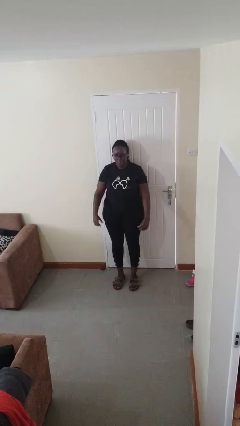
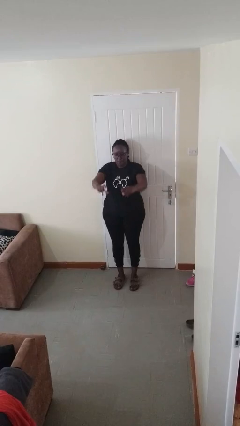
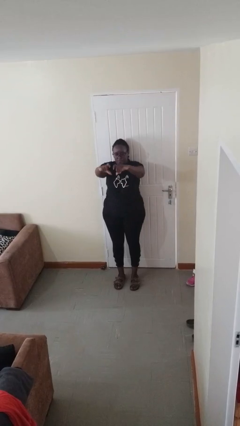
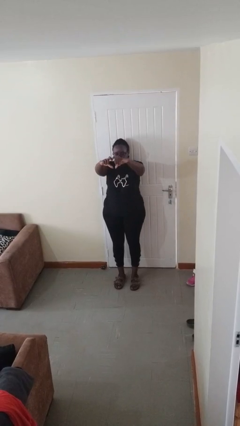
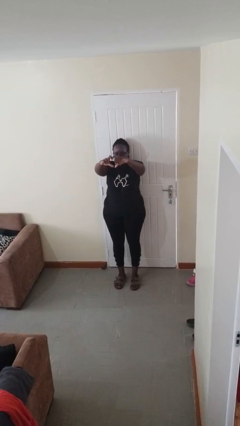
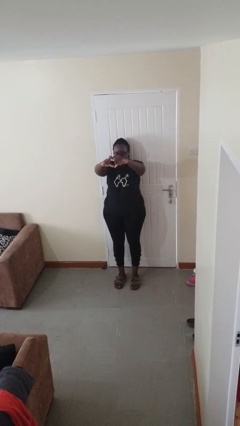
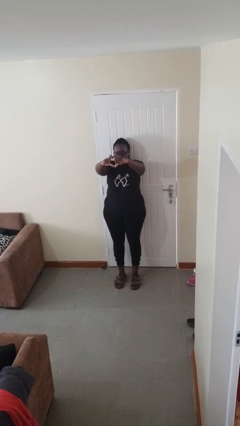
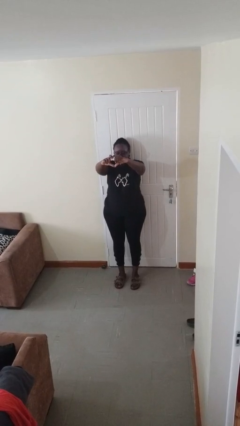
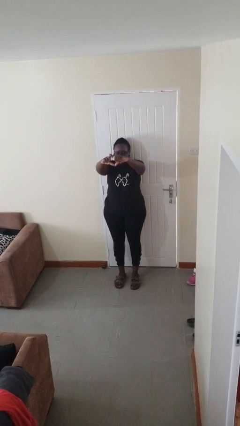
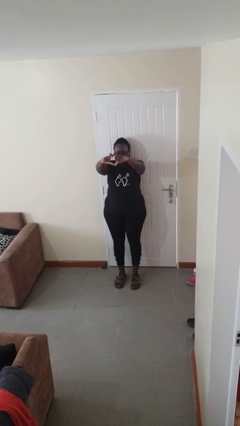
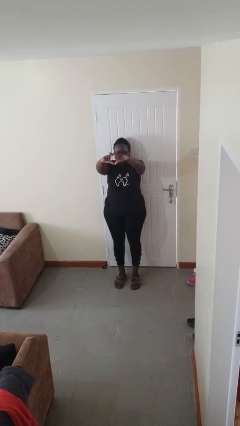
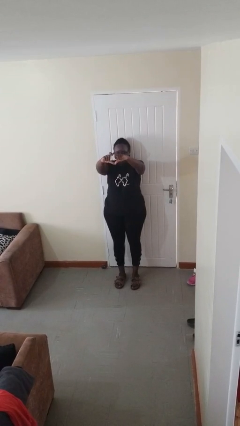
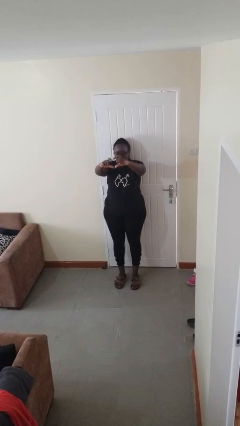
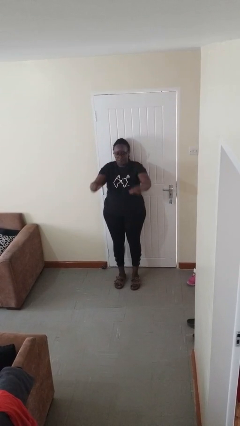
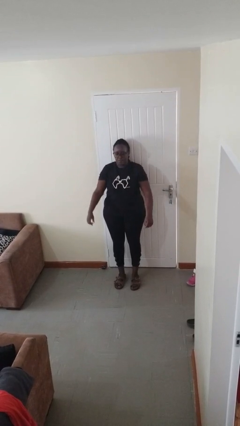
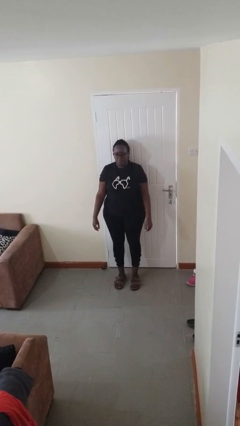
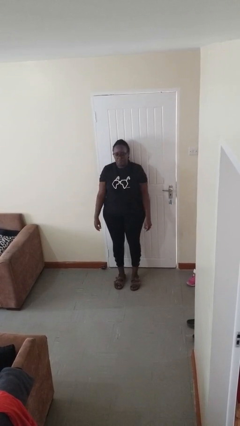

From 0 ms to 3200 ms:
person gestures heart

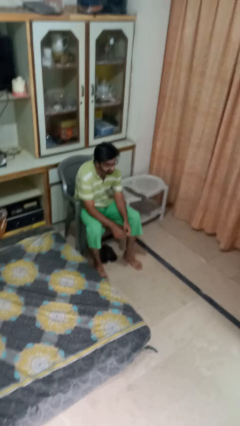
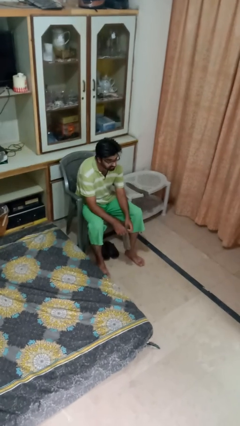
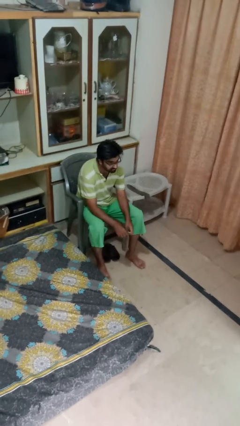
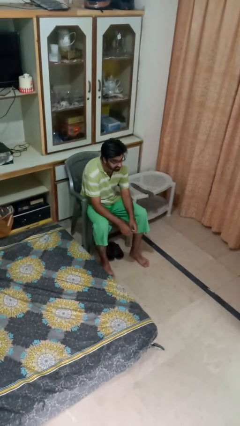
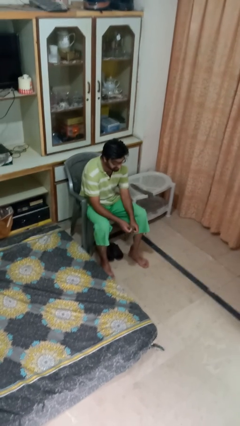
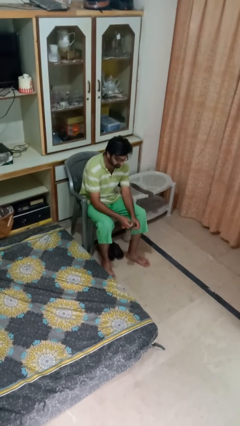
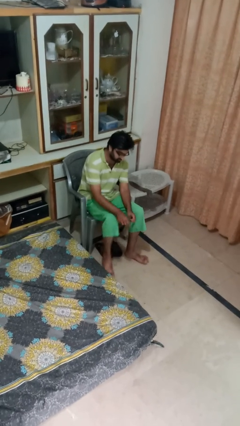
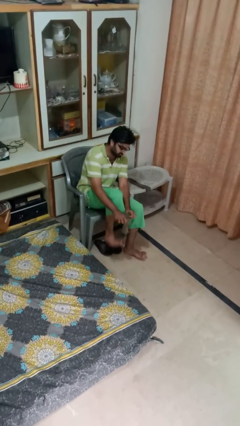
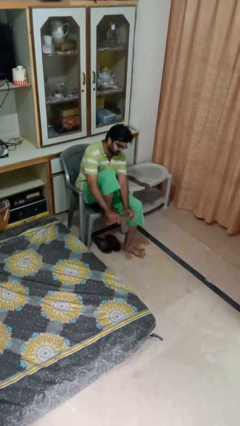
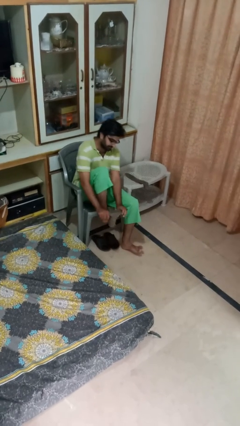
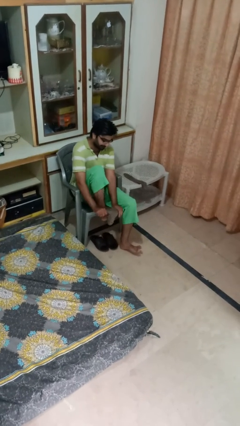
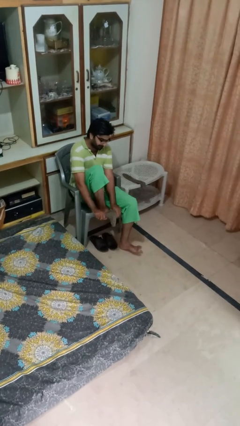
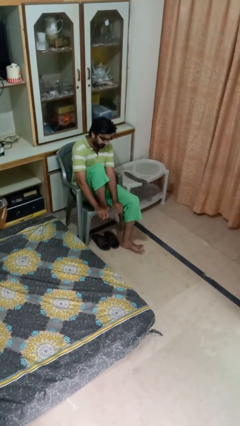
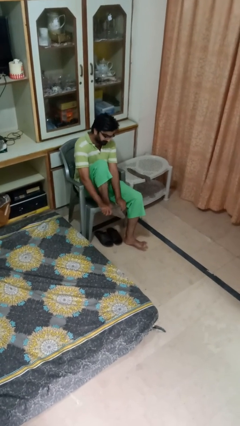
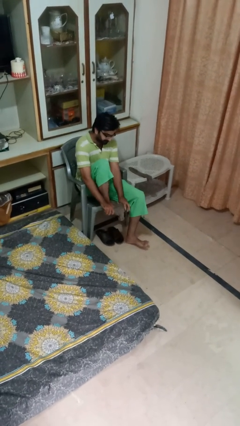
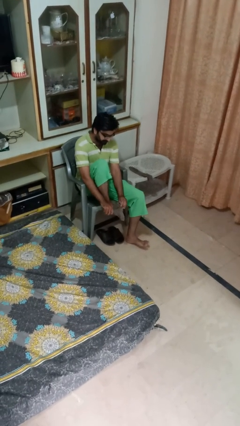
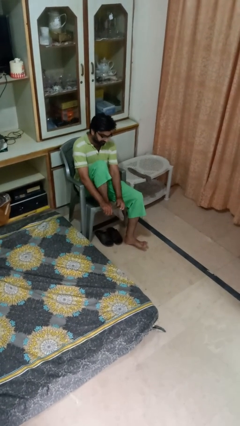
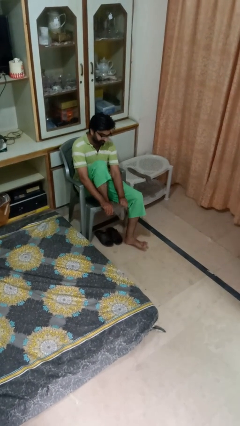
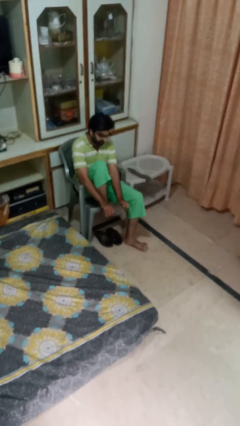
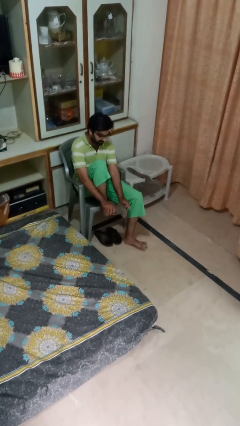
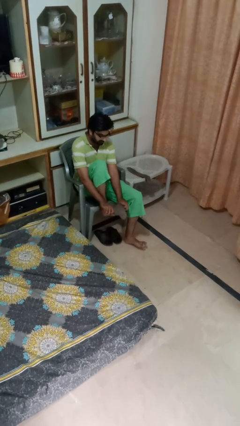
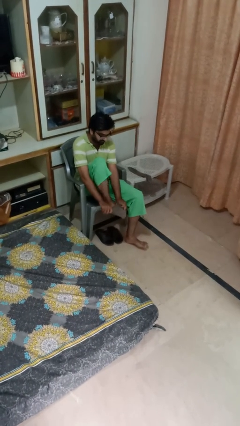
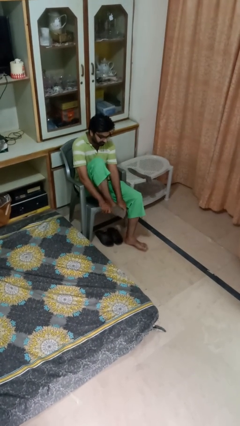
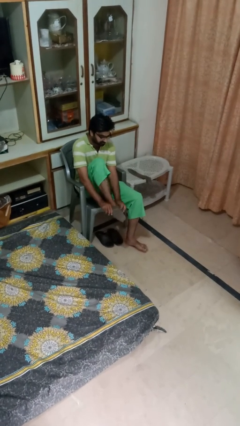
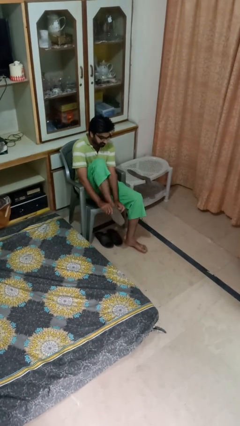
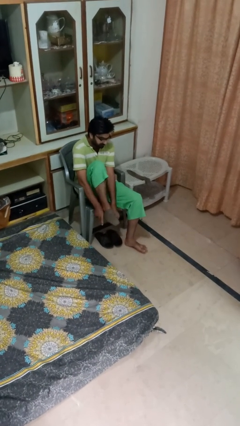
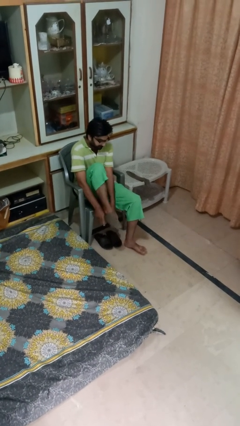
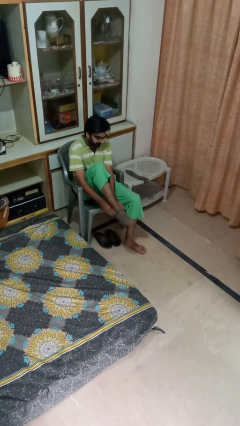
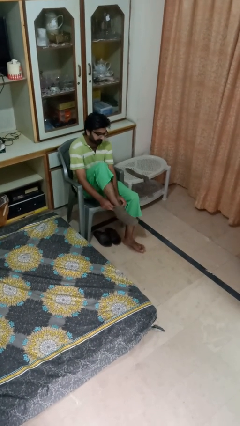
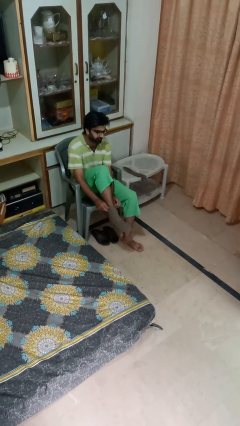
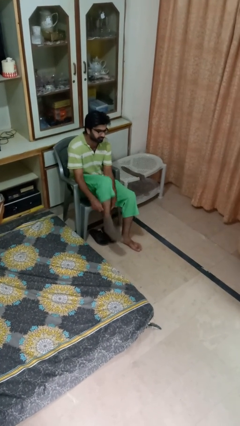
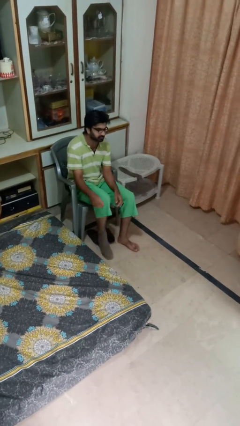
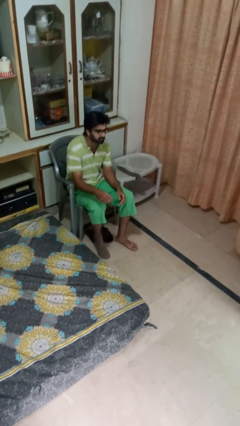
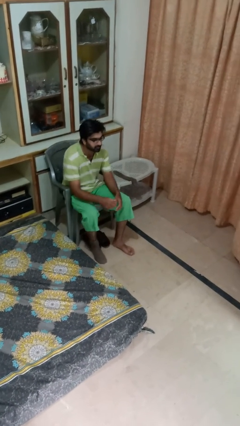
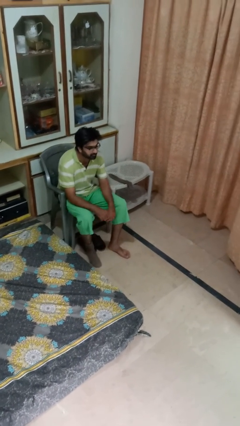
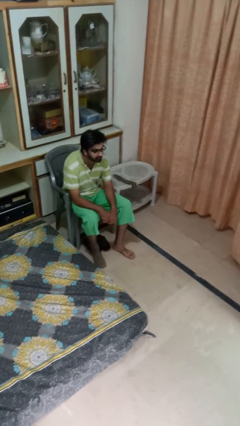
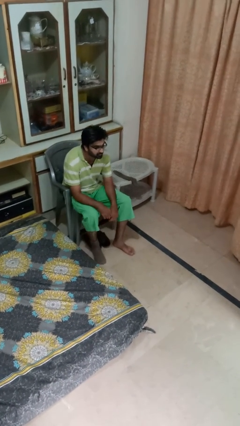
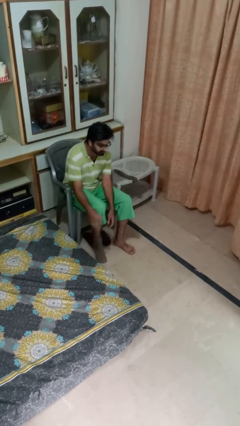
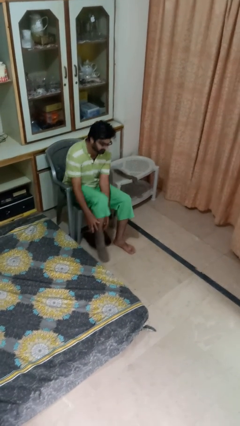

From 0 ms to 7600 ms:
person puts on socks

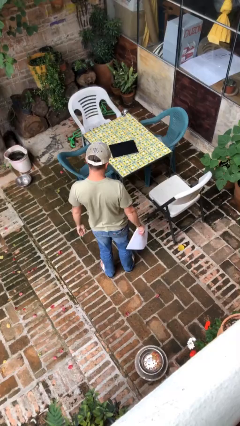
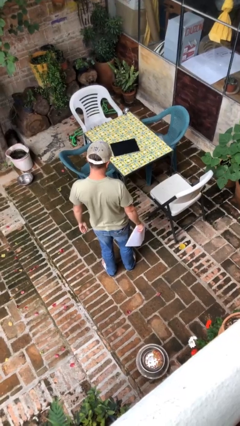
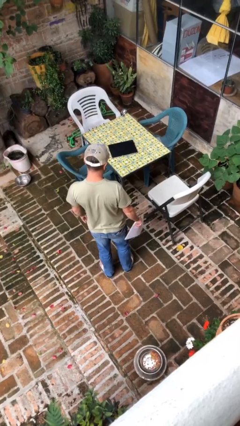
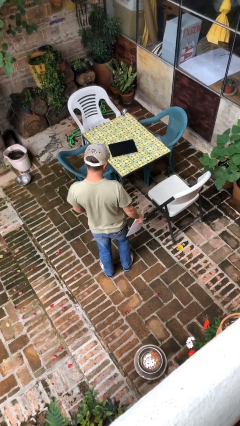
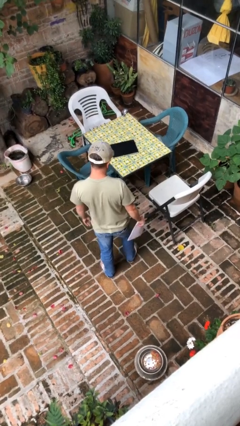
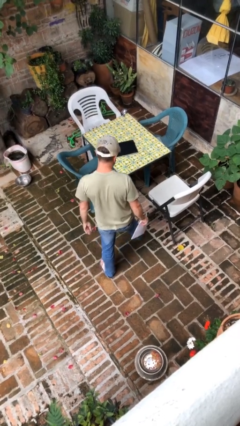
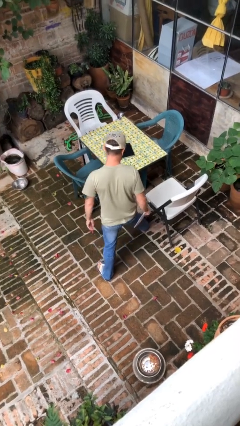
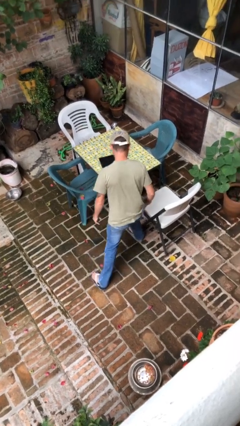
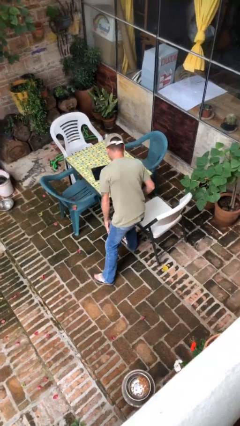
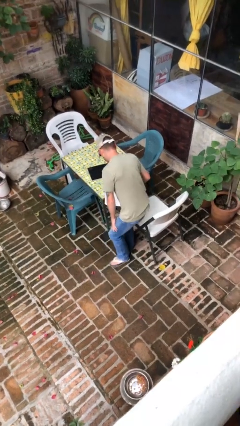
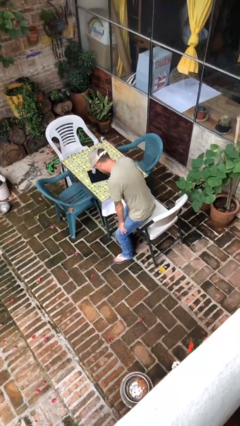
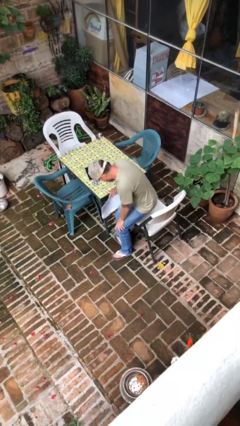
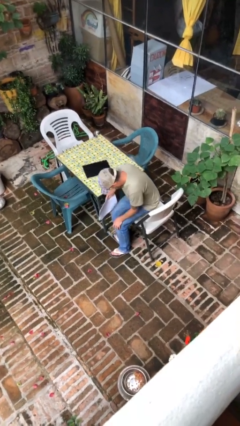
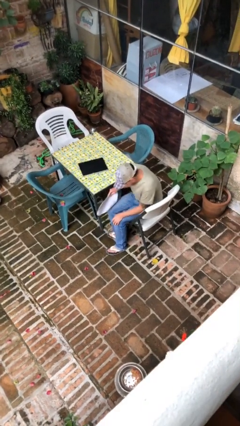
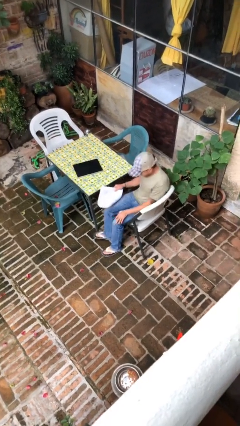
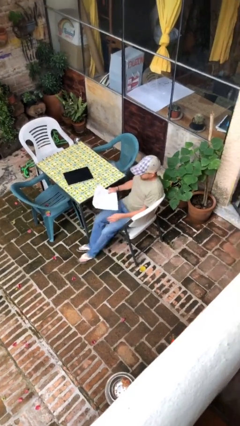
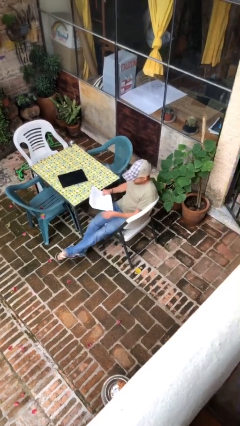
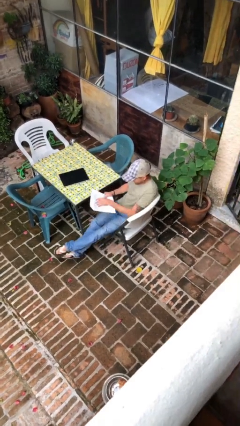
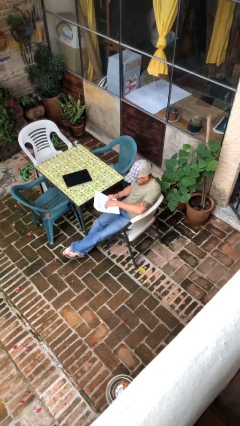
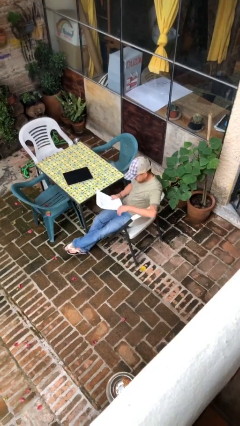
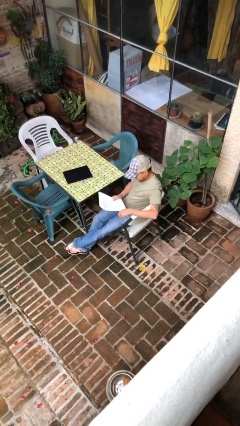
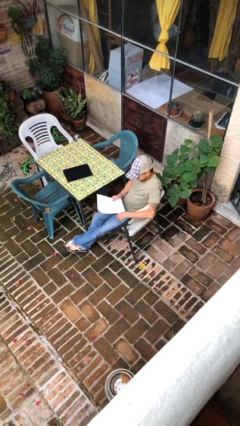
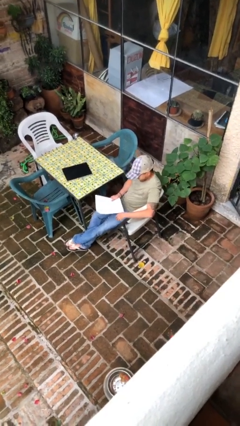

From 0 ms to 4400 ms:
person sits down

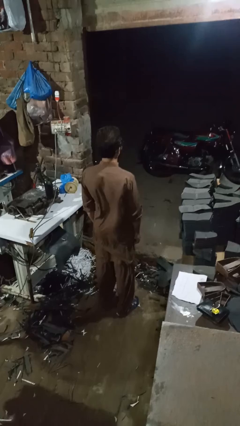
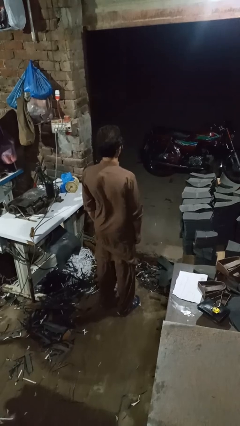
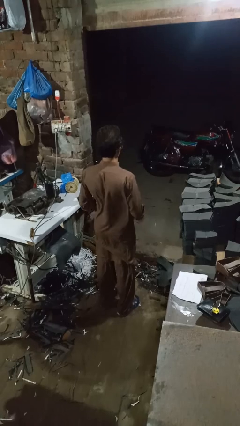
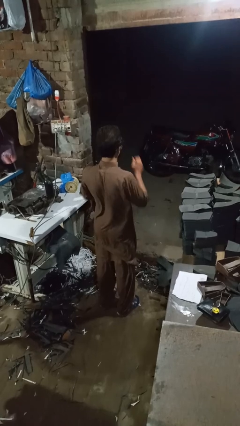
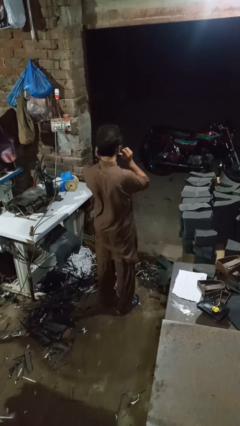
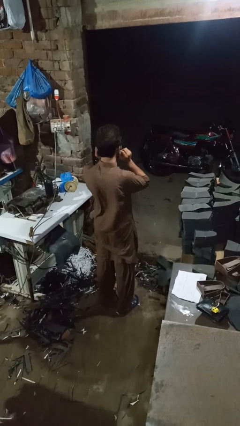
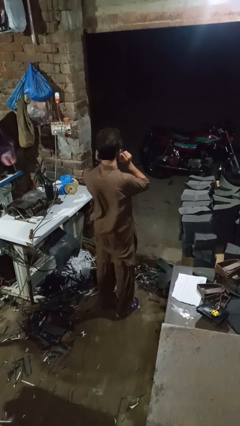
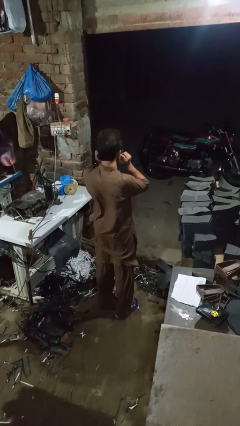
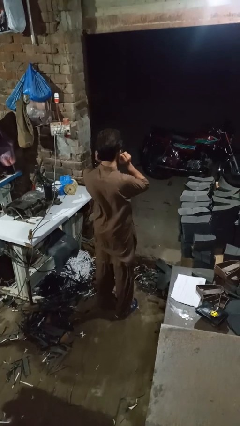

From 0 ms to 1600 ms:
person touches earlobe

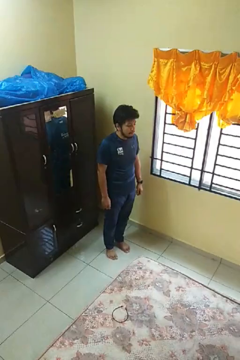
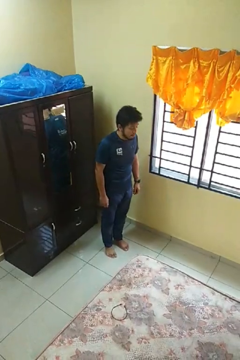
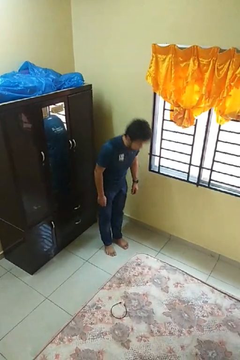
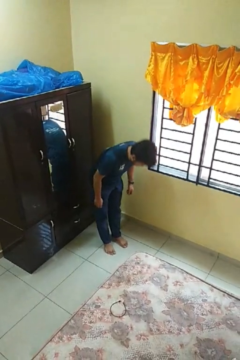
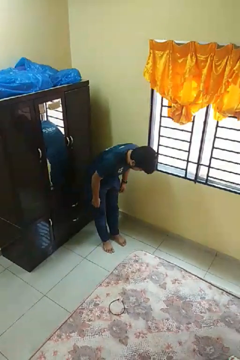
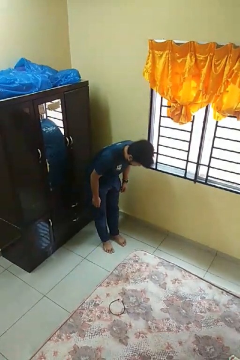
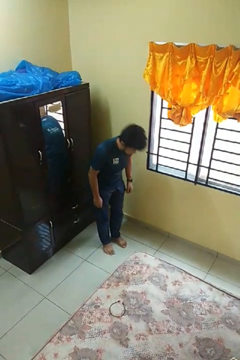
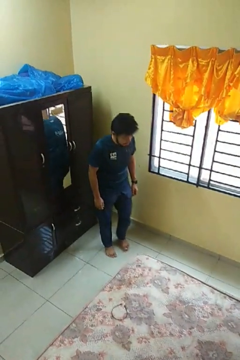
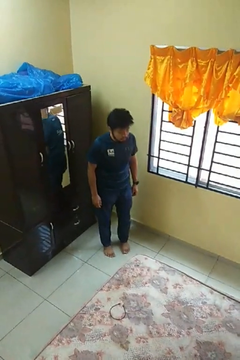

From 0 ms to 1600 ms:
person bows
